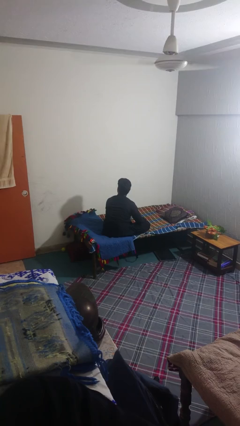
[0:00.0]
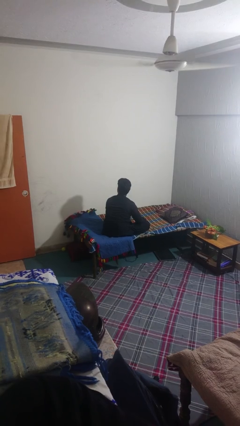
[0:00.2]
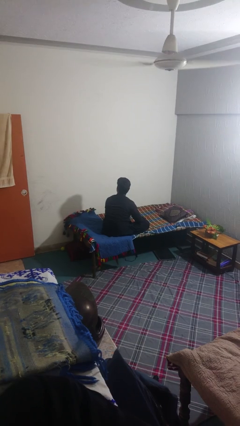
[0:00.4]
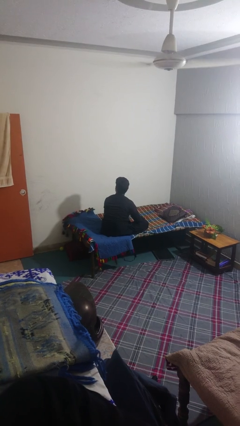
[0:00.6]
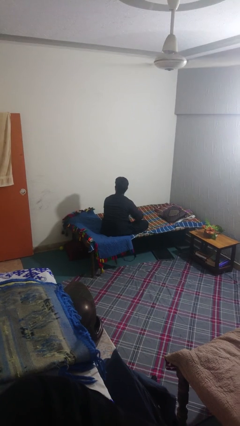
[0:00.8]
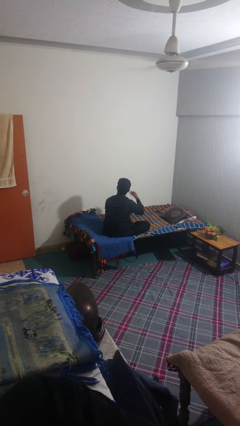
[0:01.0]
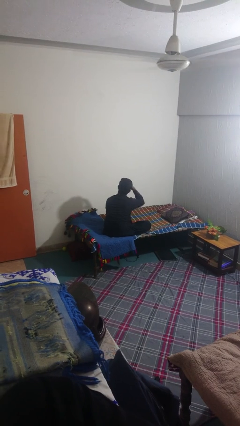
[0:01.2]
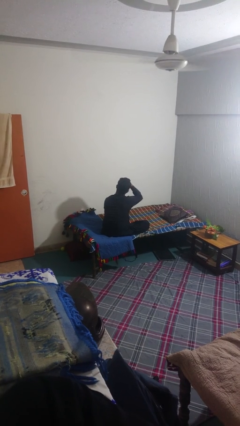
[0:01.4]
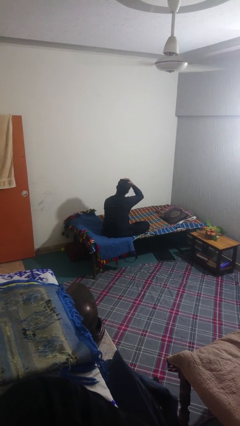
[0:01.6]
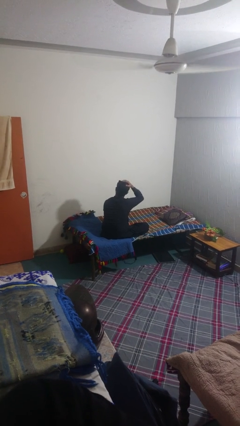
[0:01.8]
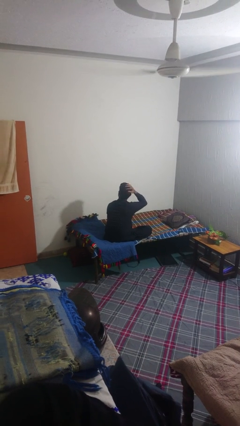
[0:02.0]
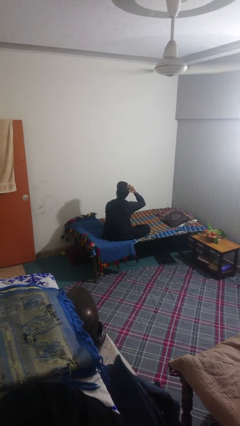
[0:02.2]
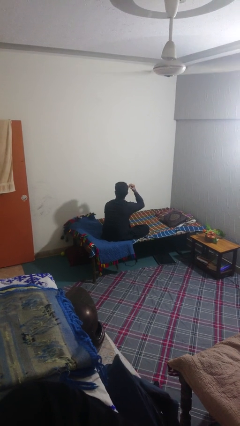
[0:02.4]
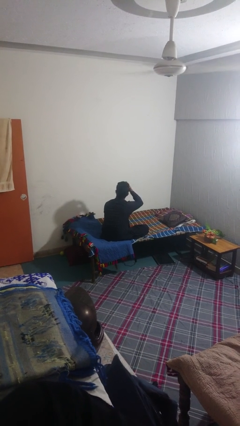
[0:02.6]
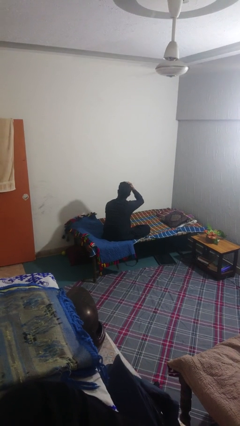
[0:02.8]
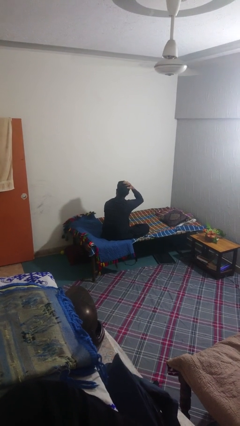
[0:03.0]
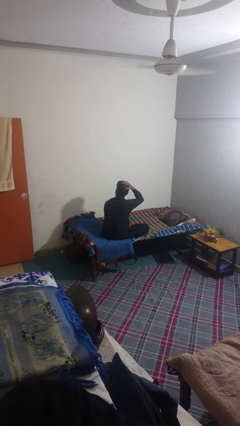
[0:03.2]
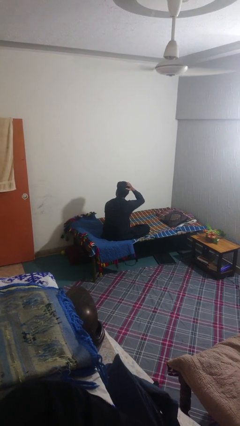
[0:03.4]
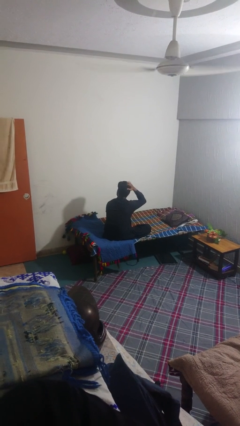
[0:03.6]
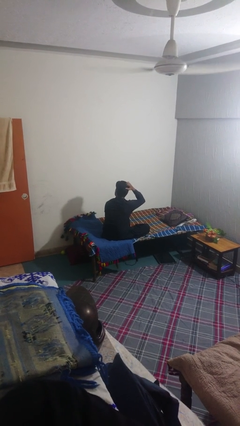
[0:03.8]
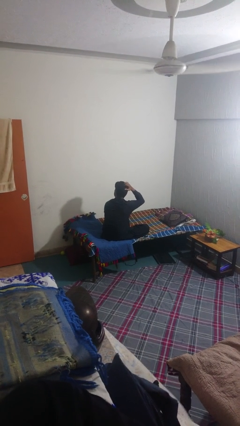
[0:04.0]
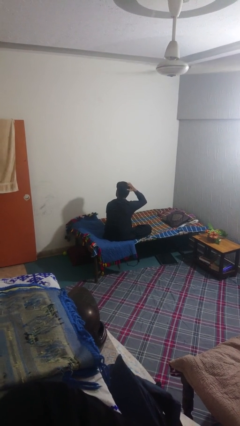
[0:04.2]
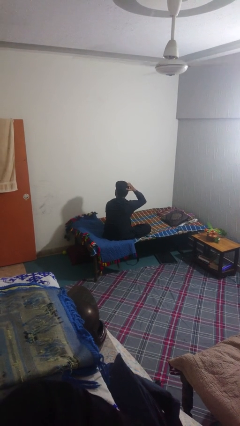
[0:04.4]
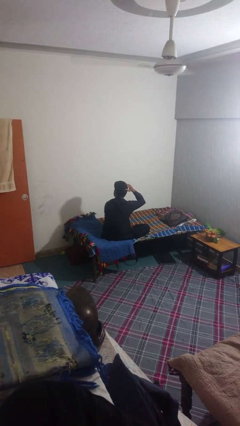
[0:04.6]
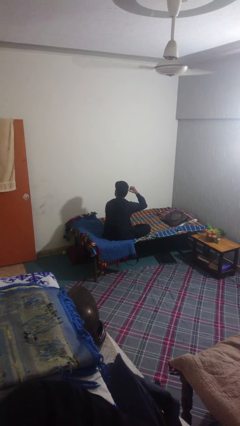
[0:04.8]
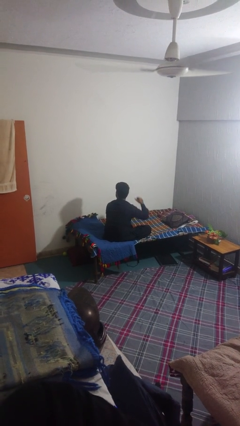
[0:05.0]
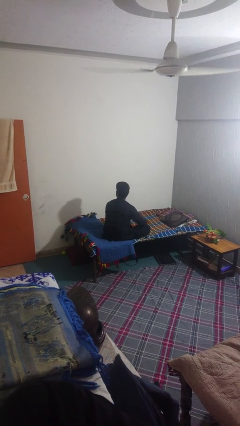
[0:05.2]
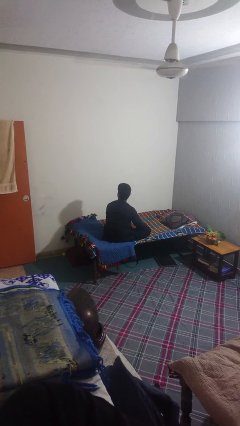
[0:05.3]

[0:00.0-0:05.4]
person strokes hair

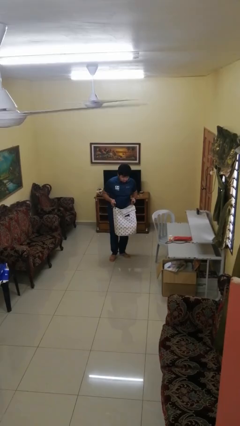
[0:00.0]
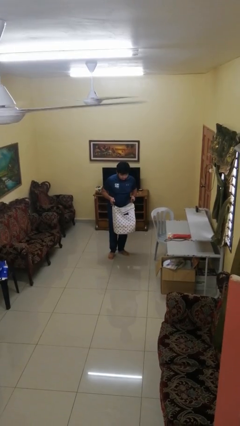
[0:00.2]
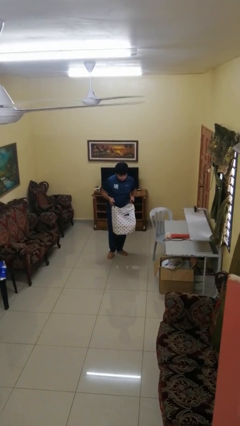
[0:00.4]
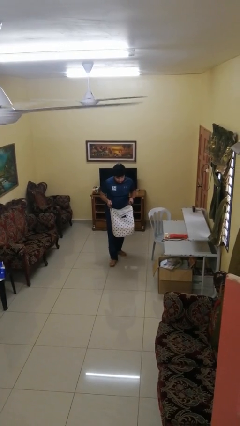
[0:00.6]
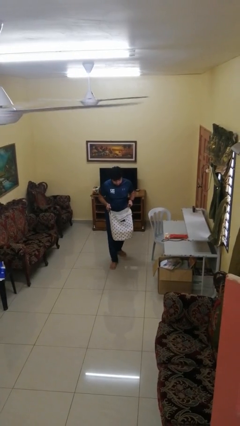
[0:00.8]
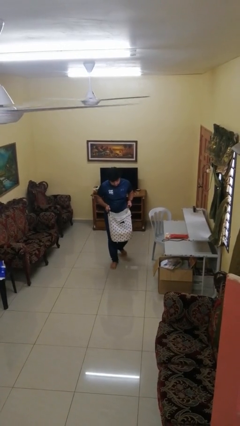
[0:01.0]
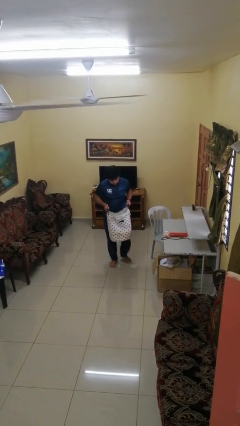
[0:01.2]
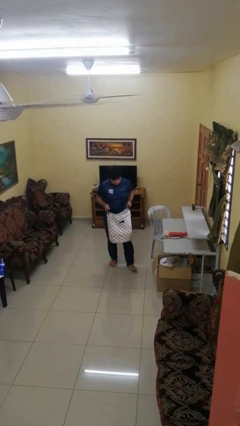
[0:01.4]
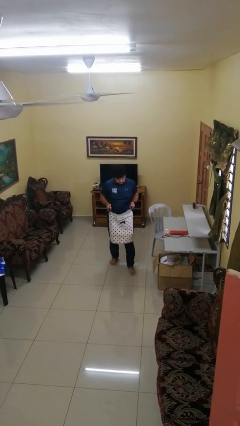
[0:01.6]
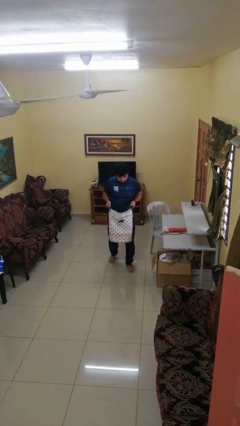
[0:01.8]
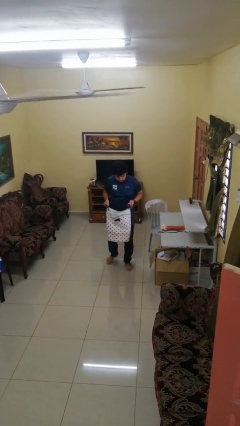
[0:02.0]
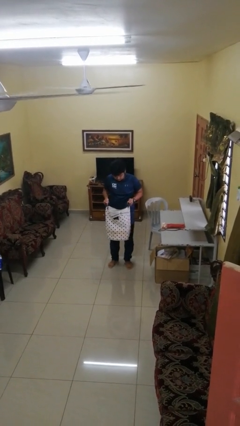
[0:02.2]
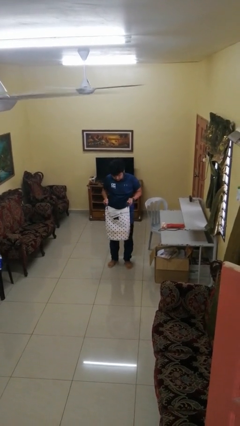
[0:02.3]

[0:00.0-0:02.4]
person carries laundry basket

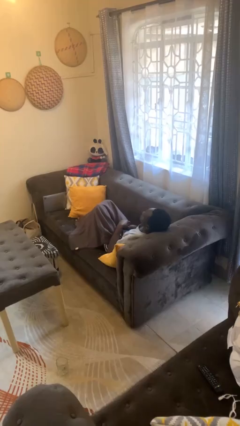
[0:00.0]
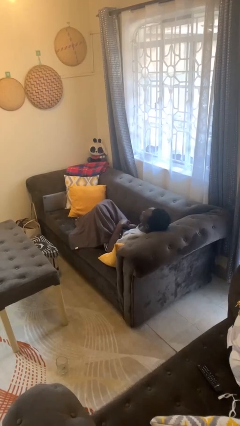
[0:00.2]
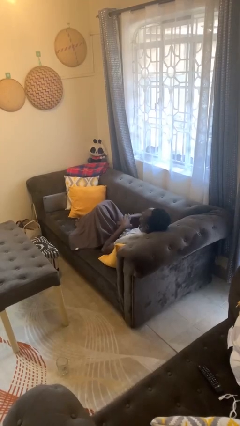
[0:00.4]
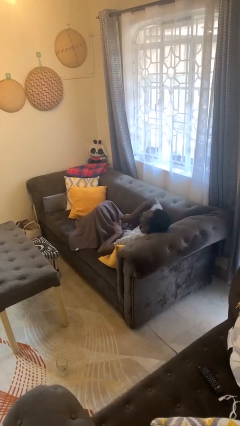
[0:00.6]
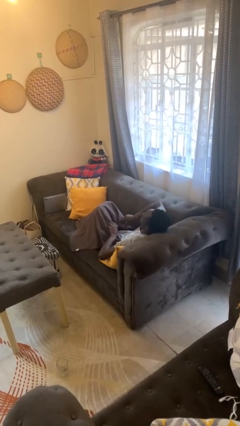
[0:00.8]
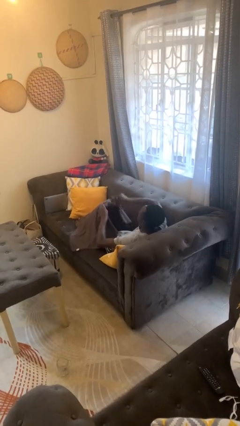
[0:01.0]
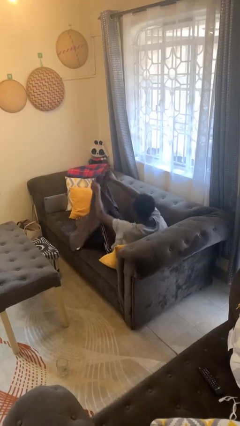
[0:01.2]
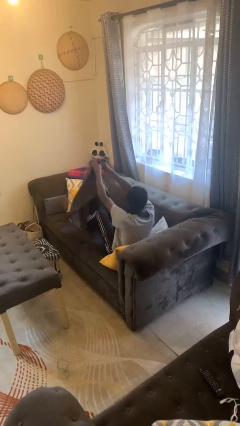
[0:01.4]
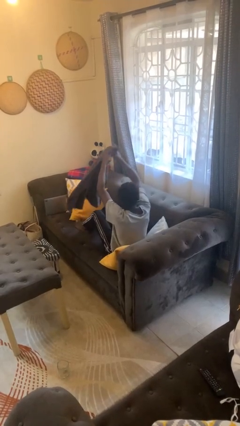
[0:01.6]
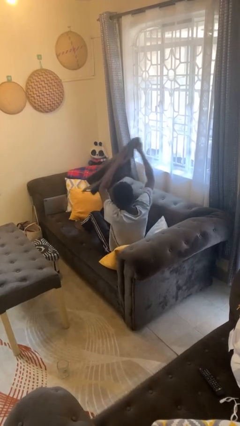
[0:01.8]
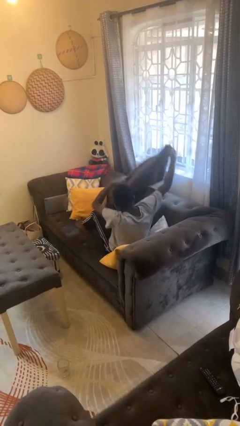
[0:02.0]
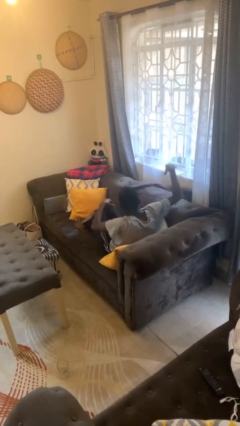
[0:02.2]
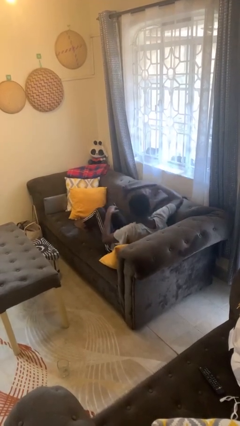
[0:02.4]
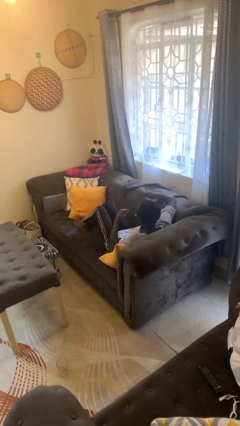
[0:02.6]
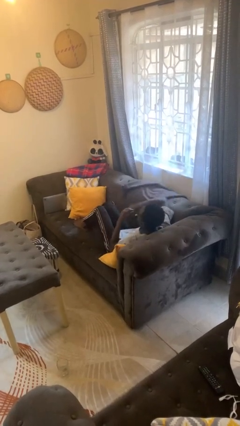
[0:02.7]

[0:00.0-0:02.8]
person uncovers with blanket

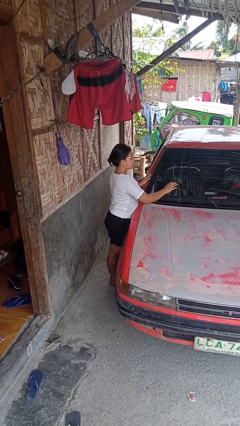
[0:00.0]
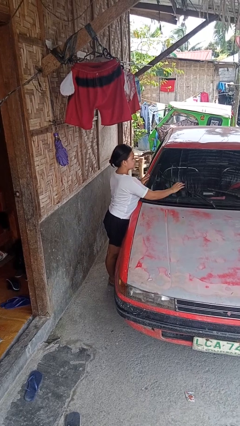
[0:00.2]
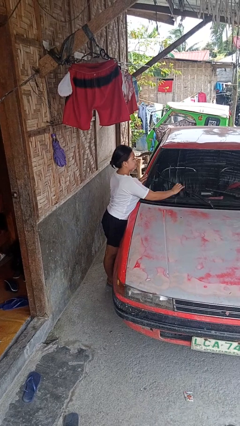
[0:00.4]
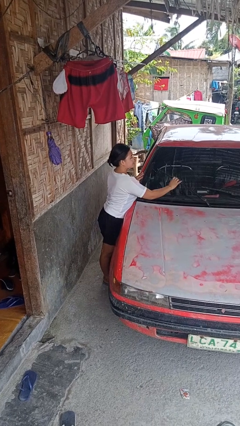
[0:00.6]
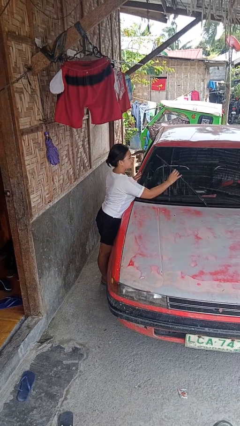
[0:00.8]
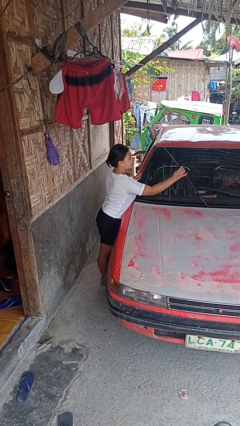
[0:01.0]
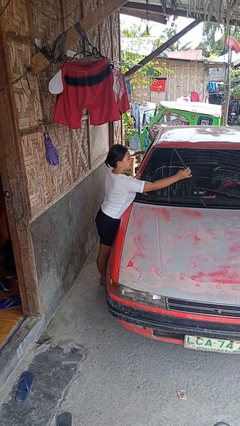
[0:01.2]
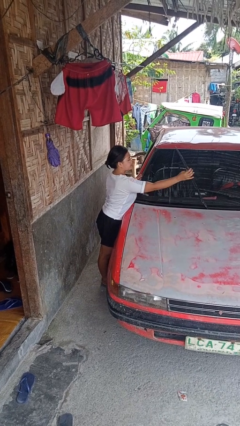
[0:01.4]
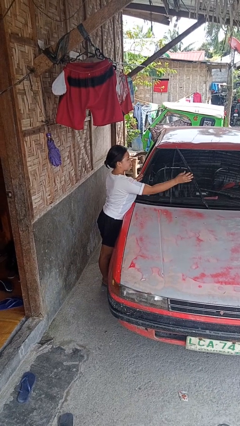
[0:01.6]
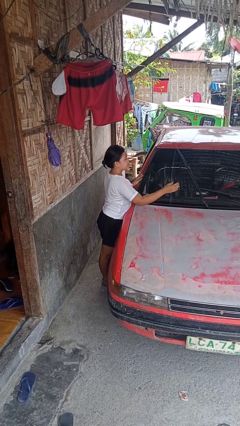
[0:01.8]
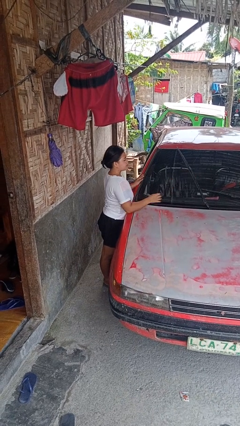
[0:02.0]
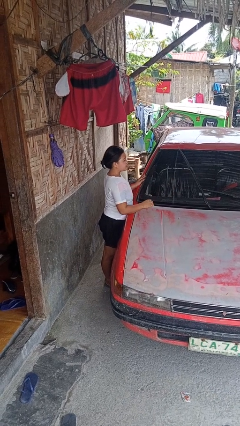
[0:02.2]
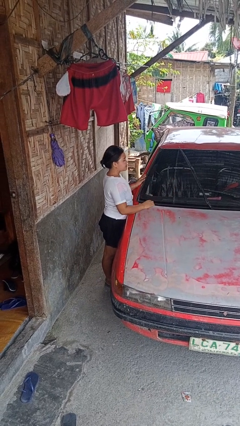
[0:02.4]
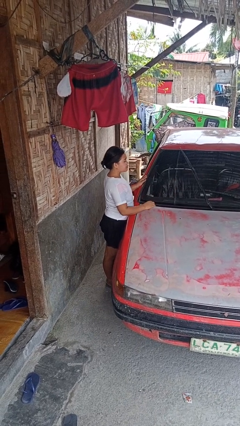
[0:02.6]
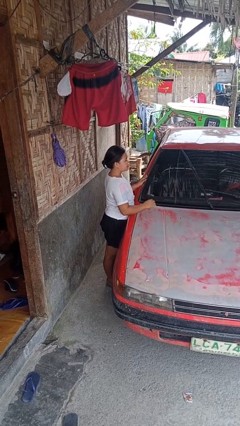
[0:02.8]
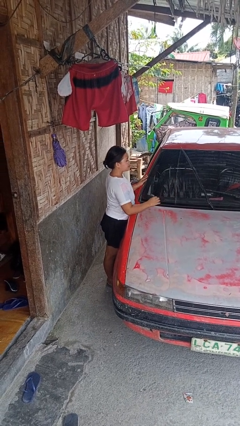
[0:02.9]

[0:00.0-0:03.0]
person flips up car wipers

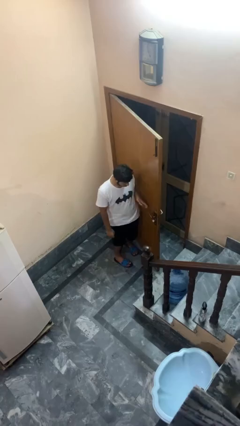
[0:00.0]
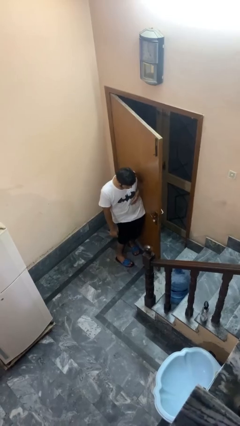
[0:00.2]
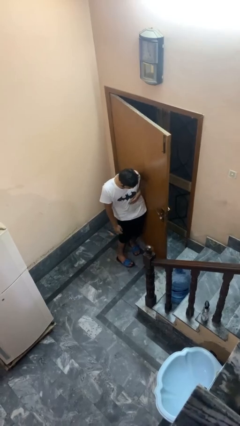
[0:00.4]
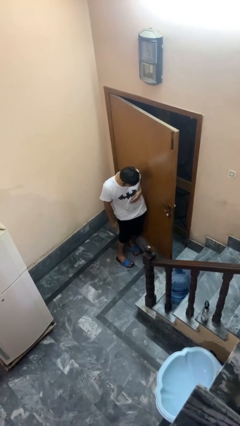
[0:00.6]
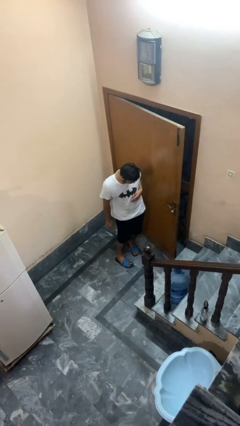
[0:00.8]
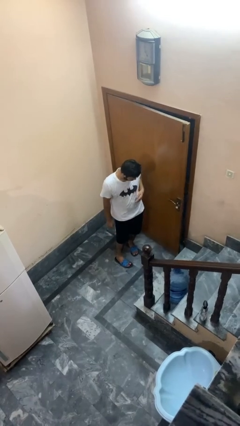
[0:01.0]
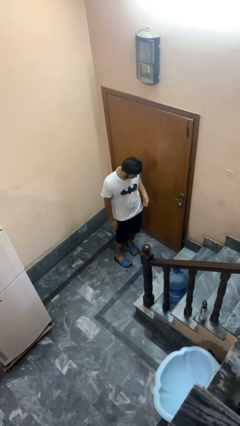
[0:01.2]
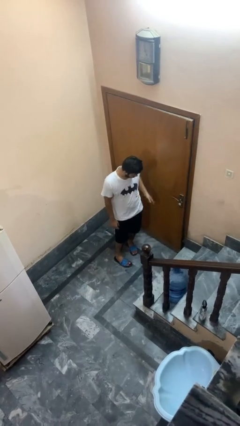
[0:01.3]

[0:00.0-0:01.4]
person closes door with hip

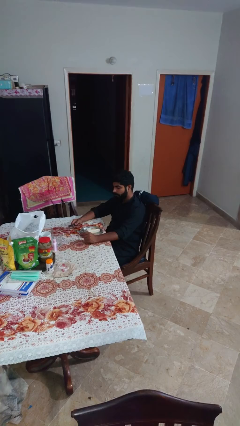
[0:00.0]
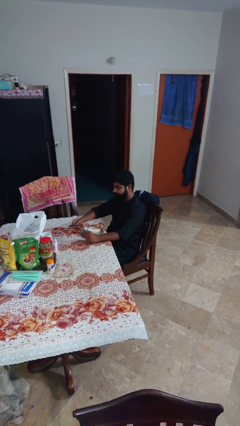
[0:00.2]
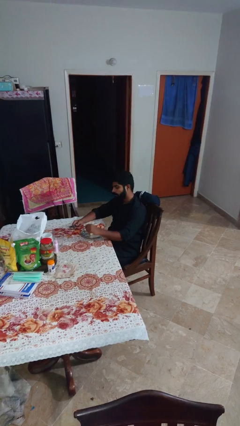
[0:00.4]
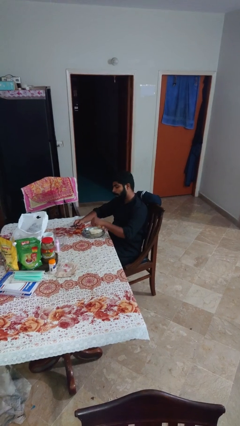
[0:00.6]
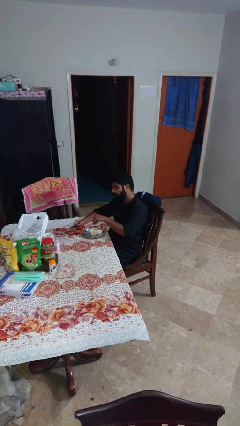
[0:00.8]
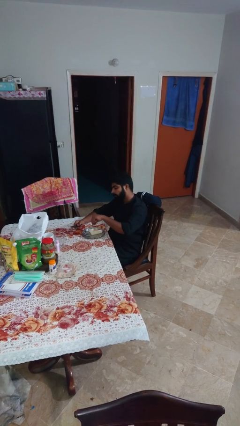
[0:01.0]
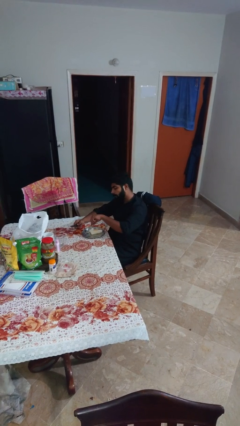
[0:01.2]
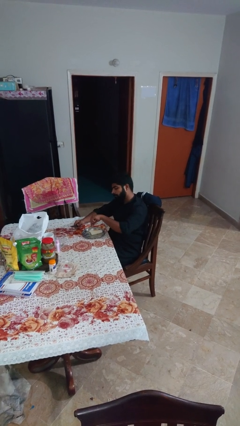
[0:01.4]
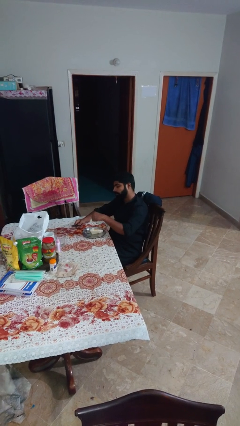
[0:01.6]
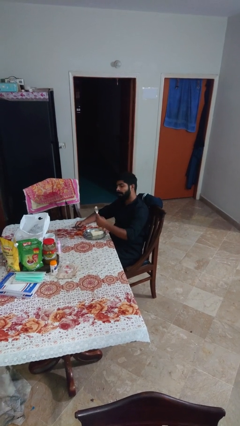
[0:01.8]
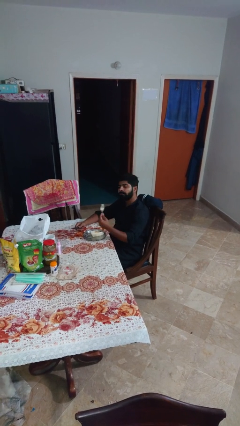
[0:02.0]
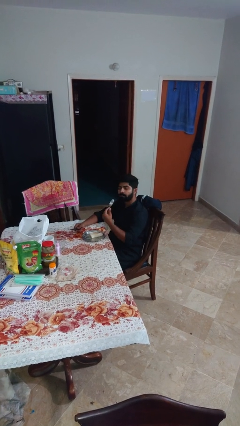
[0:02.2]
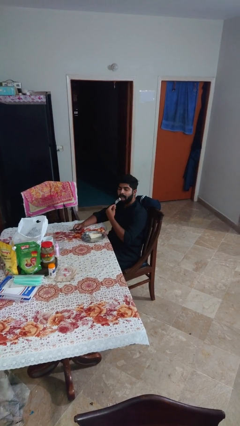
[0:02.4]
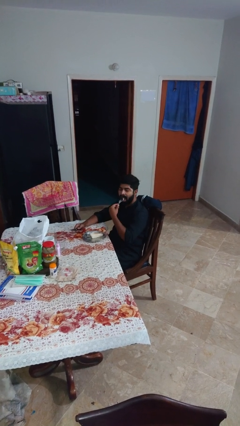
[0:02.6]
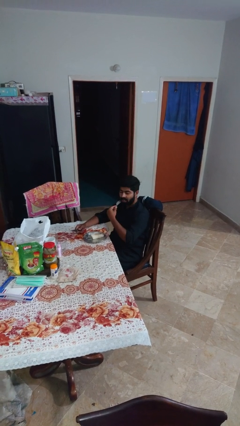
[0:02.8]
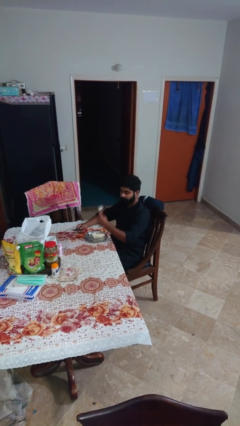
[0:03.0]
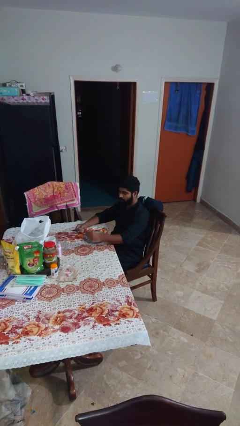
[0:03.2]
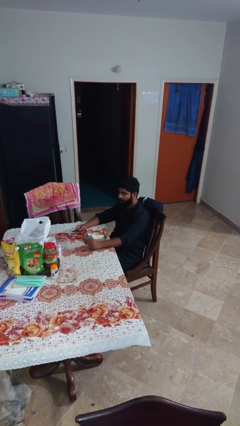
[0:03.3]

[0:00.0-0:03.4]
person eats with utensil
